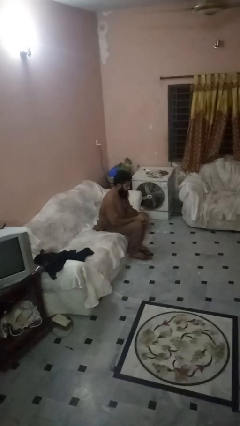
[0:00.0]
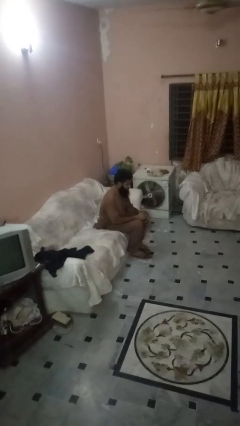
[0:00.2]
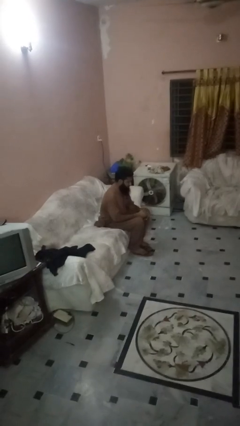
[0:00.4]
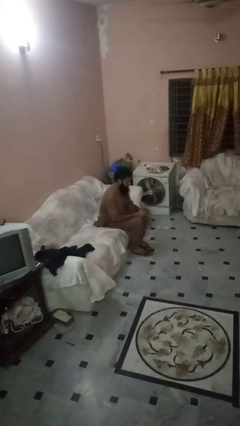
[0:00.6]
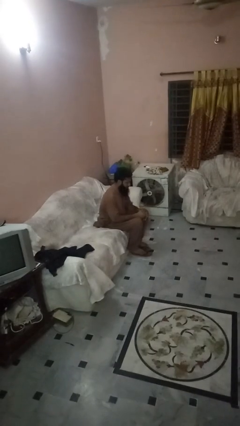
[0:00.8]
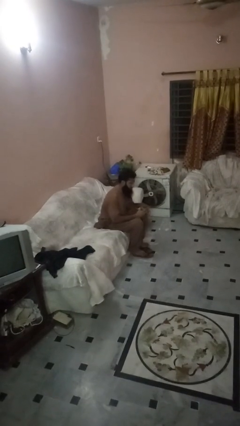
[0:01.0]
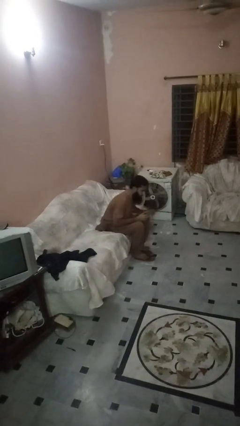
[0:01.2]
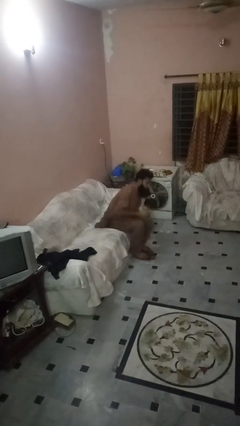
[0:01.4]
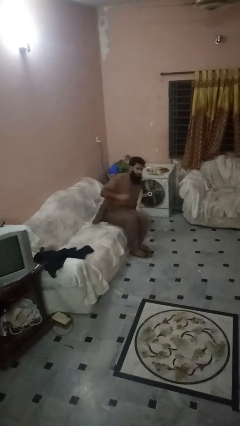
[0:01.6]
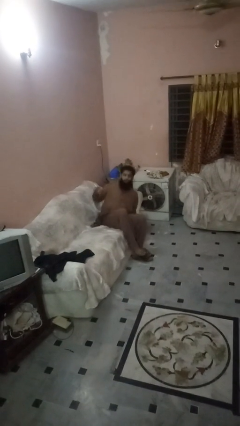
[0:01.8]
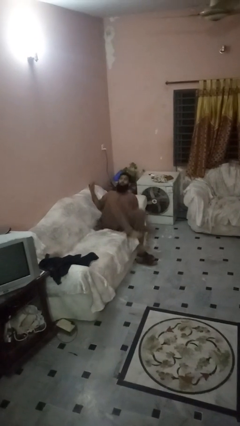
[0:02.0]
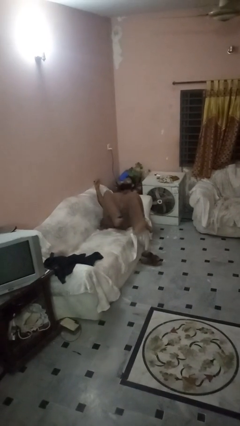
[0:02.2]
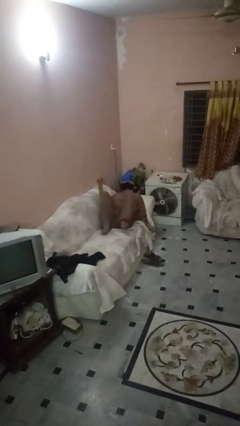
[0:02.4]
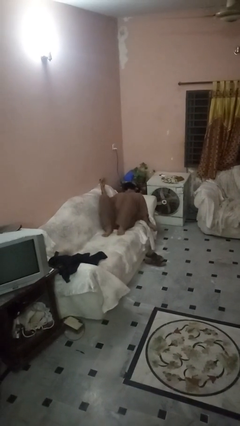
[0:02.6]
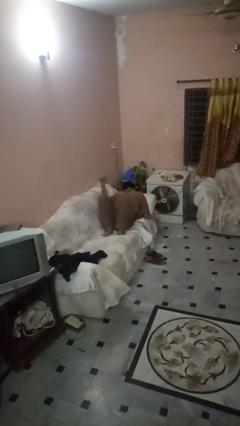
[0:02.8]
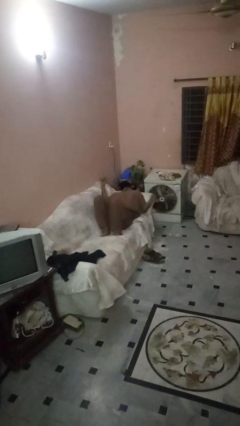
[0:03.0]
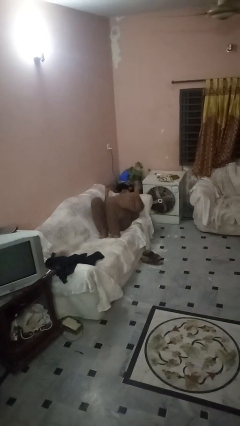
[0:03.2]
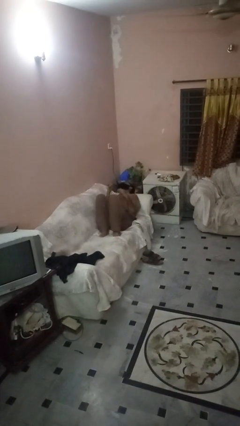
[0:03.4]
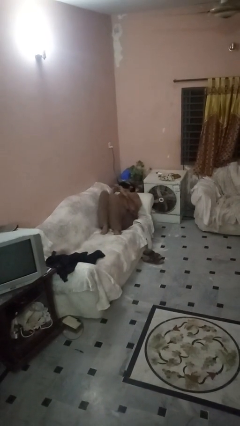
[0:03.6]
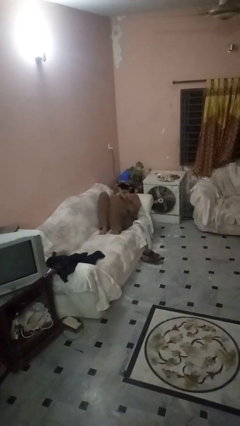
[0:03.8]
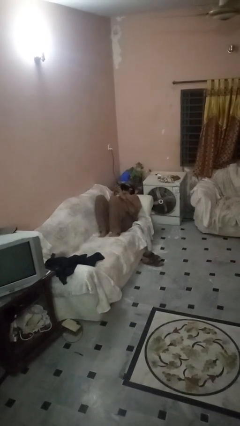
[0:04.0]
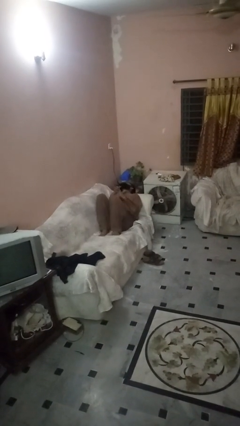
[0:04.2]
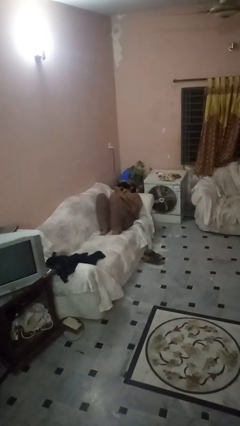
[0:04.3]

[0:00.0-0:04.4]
person lies down on couch

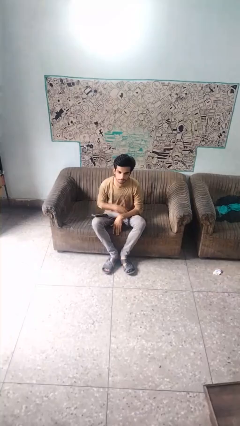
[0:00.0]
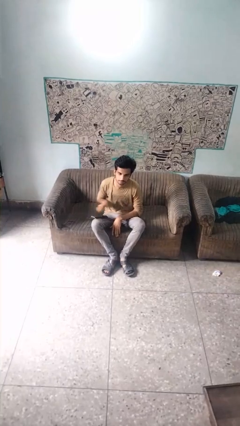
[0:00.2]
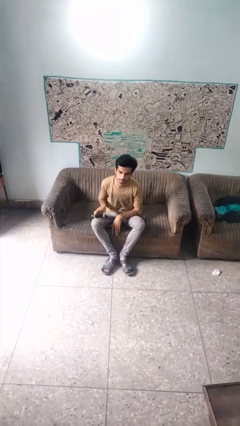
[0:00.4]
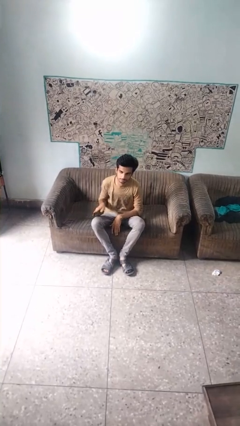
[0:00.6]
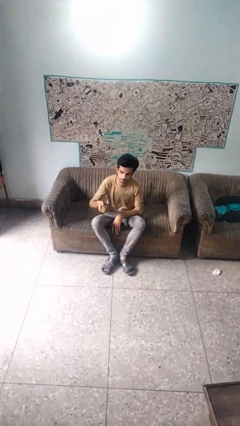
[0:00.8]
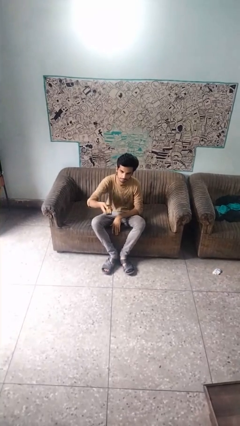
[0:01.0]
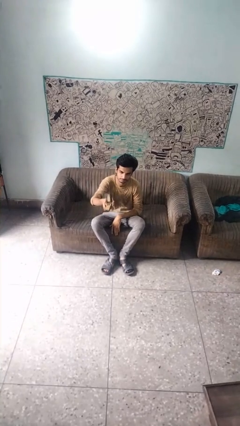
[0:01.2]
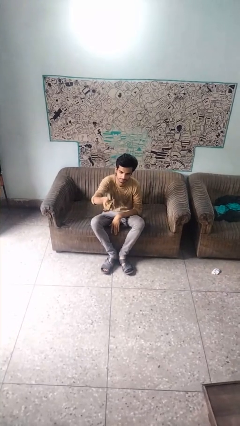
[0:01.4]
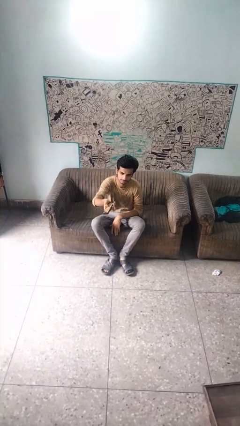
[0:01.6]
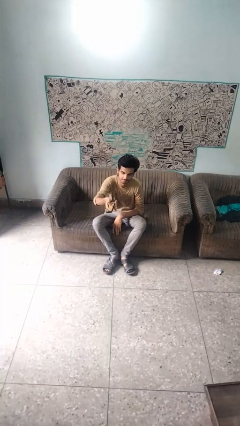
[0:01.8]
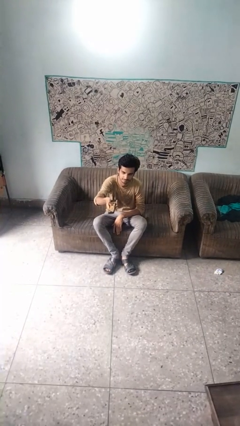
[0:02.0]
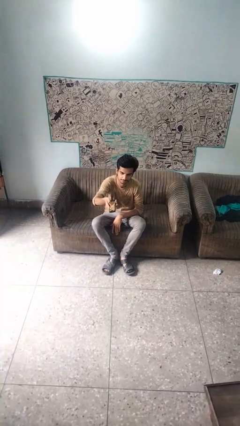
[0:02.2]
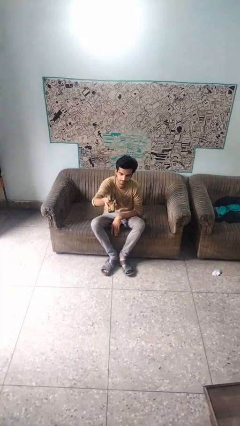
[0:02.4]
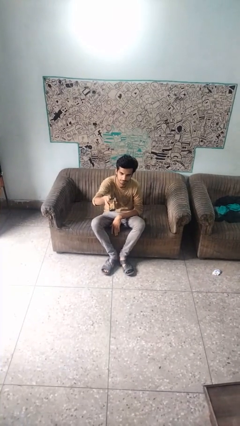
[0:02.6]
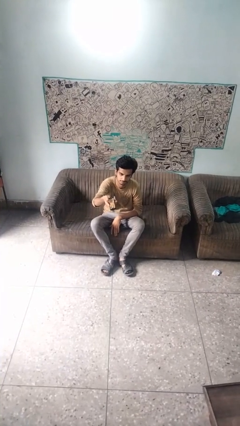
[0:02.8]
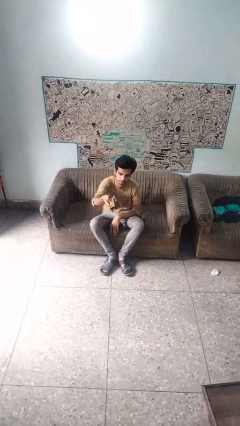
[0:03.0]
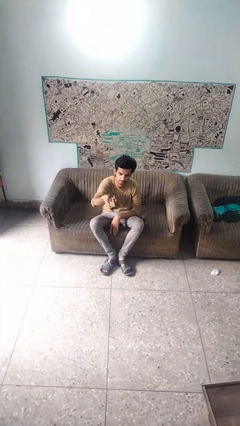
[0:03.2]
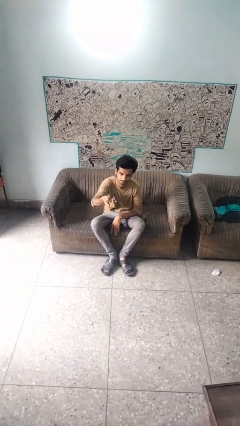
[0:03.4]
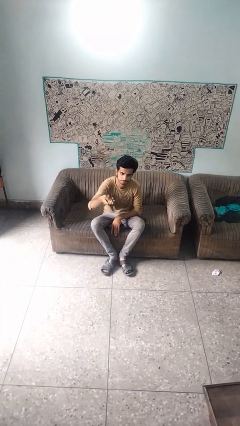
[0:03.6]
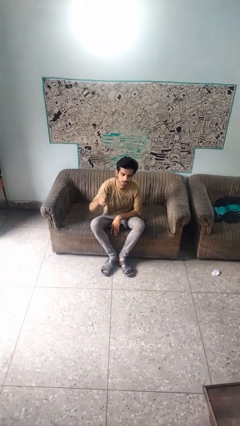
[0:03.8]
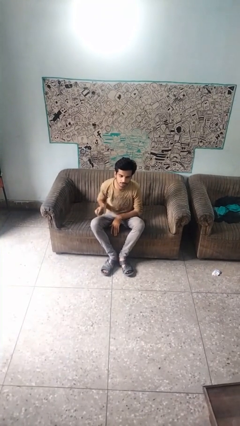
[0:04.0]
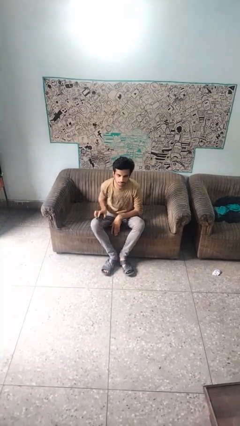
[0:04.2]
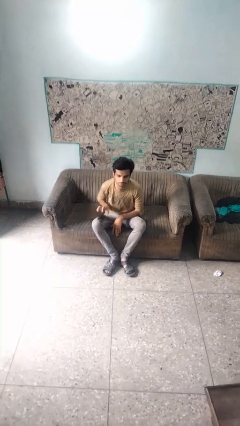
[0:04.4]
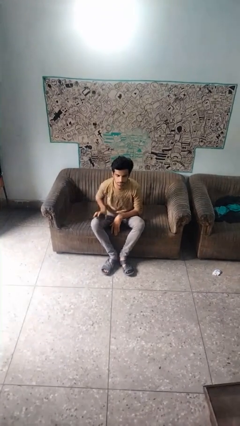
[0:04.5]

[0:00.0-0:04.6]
person uses television remote

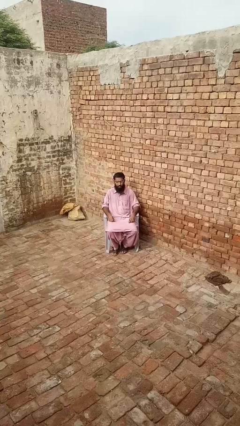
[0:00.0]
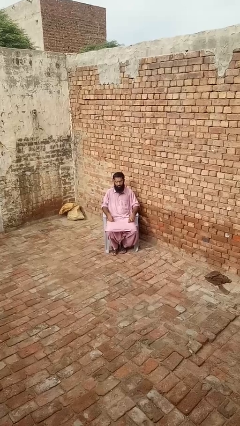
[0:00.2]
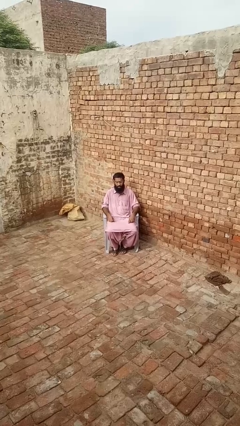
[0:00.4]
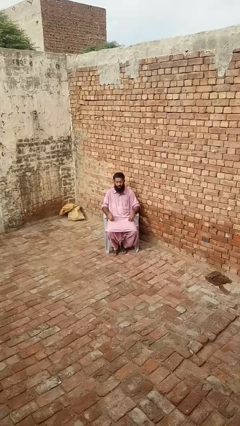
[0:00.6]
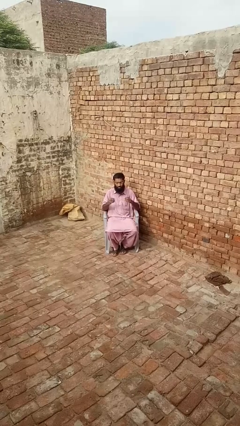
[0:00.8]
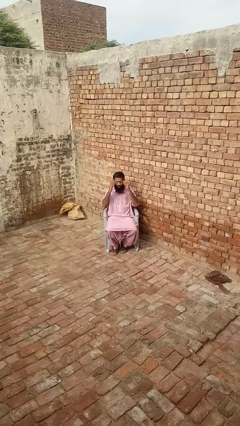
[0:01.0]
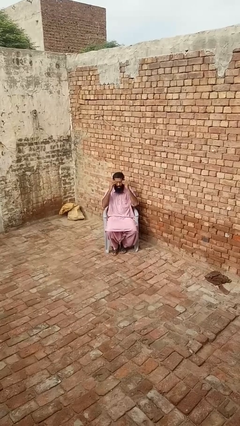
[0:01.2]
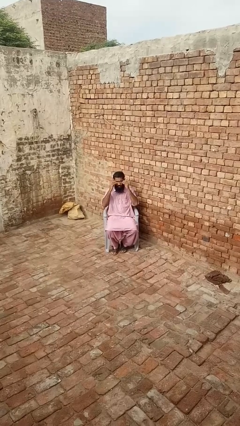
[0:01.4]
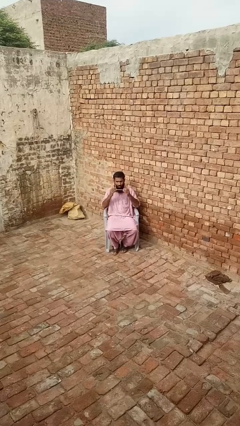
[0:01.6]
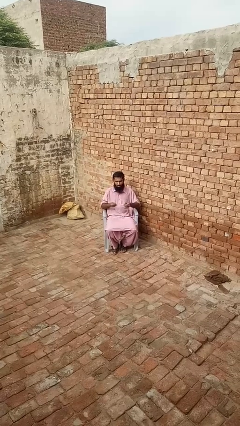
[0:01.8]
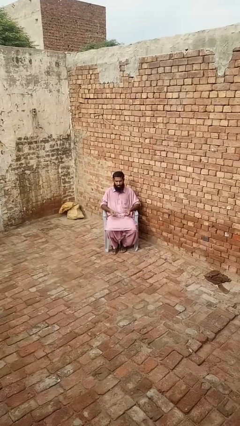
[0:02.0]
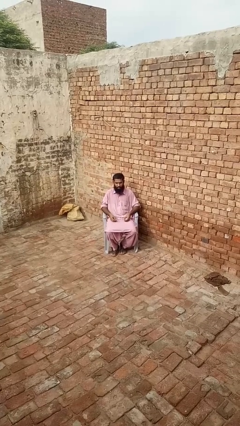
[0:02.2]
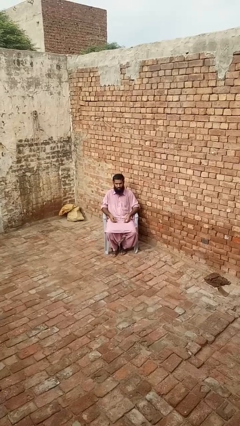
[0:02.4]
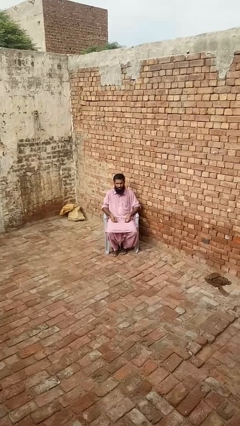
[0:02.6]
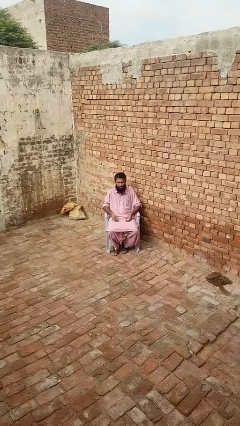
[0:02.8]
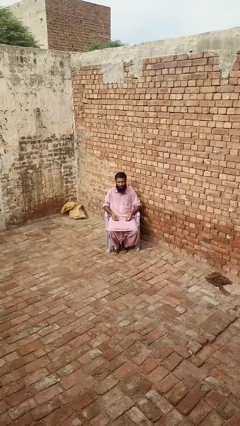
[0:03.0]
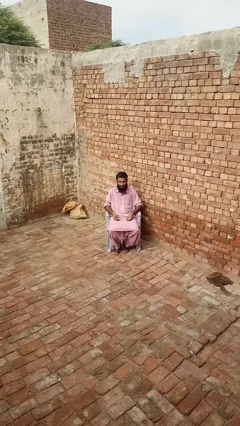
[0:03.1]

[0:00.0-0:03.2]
person takes off glasses

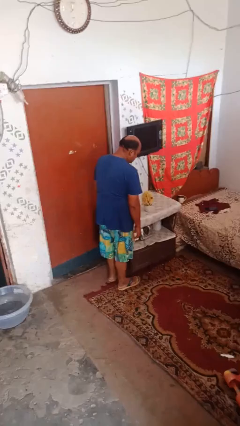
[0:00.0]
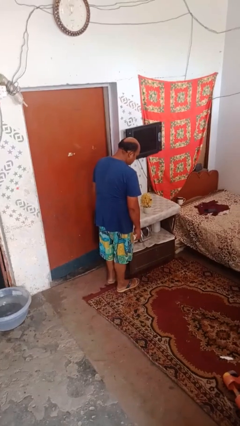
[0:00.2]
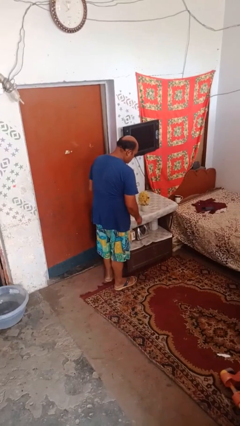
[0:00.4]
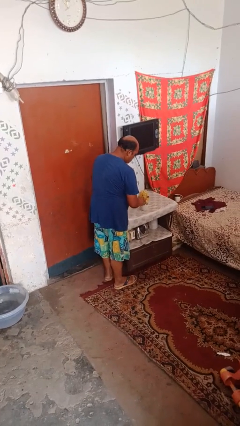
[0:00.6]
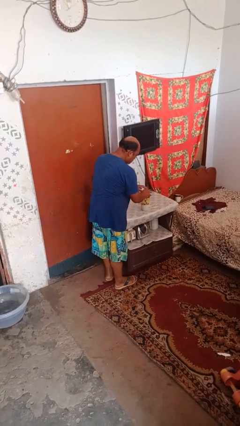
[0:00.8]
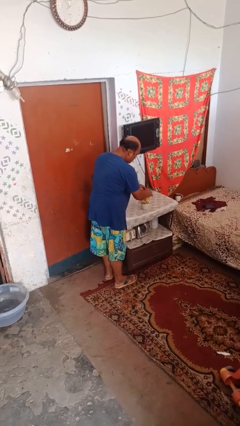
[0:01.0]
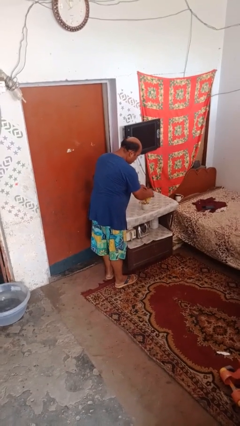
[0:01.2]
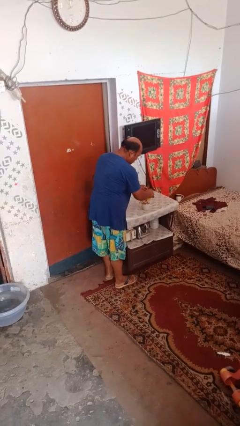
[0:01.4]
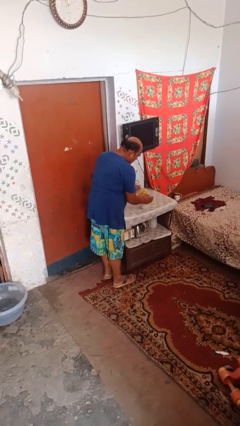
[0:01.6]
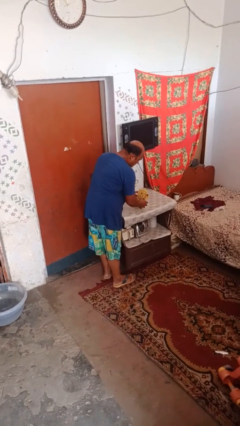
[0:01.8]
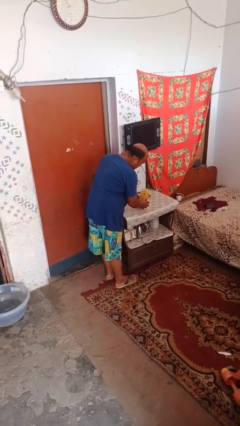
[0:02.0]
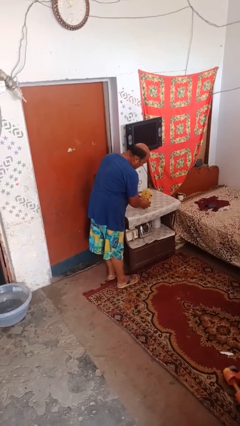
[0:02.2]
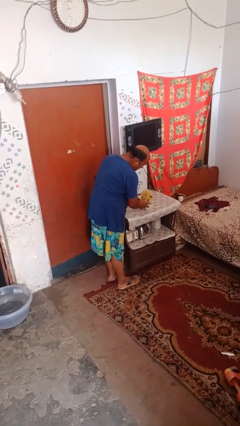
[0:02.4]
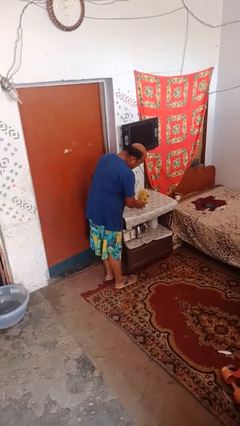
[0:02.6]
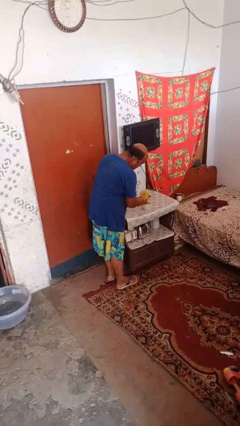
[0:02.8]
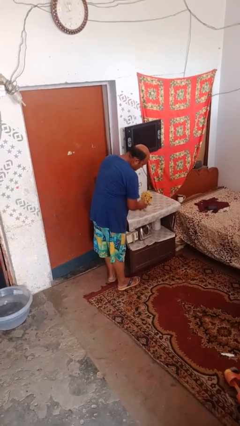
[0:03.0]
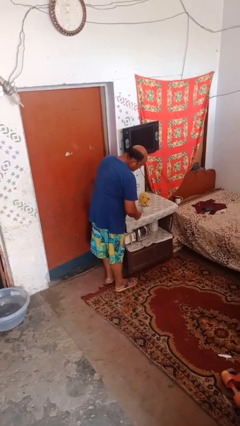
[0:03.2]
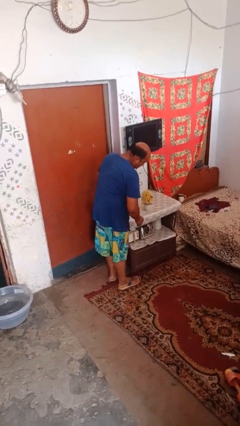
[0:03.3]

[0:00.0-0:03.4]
person arranges flowers in vase

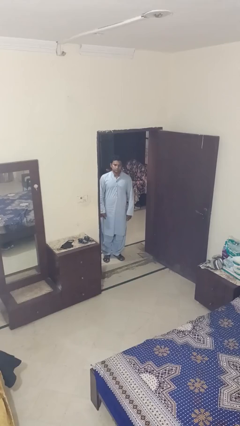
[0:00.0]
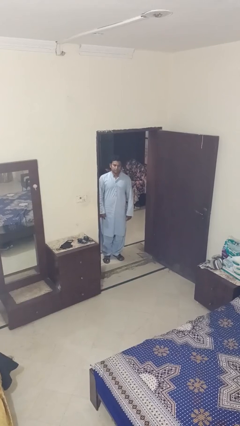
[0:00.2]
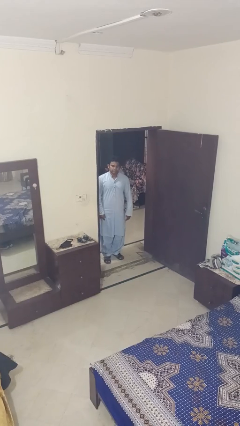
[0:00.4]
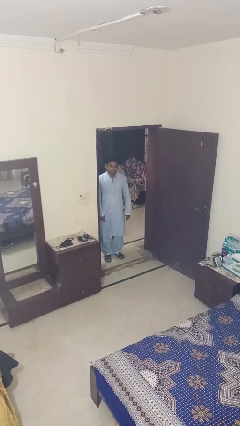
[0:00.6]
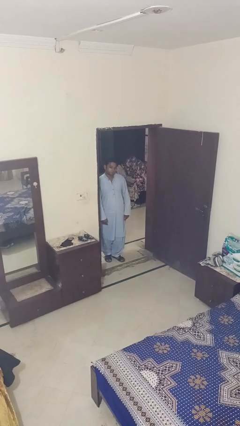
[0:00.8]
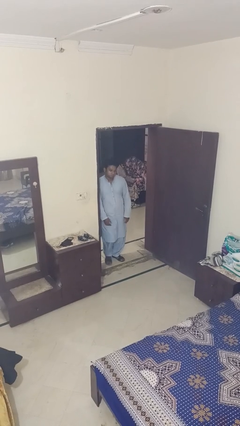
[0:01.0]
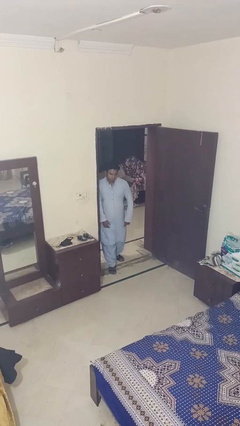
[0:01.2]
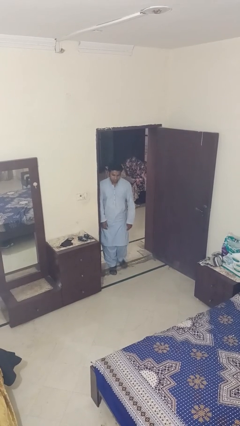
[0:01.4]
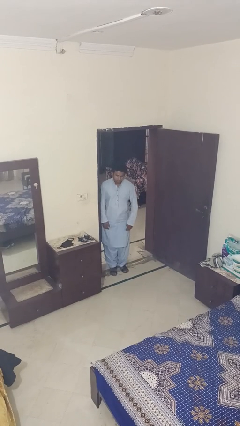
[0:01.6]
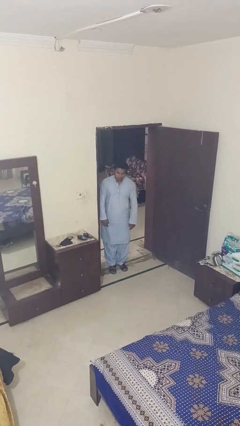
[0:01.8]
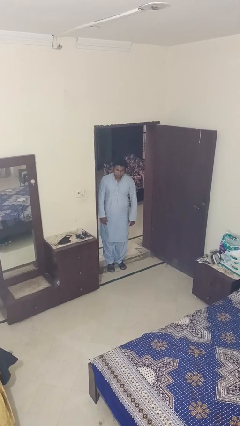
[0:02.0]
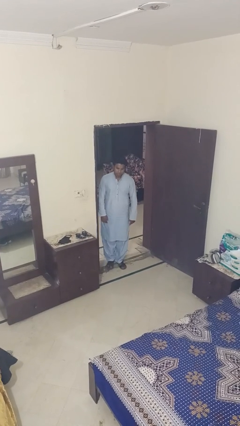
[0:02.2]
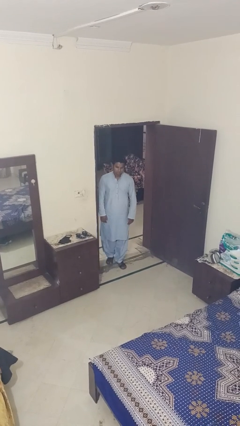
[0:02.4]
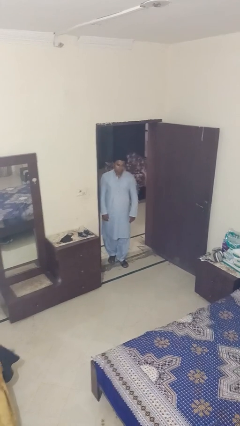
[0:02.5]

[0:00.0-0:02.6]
person bumps into wall
